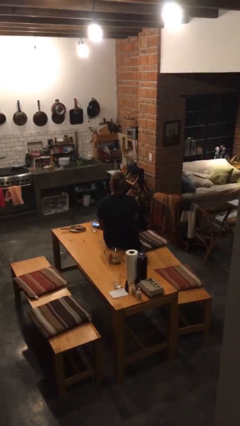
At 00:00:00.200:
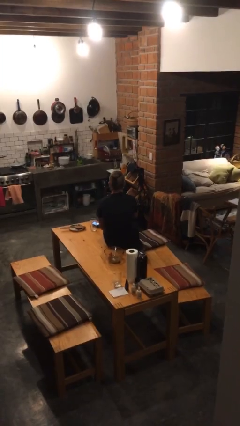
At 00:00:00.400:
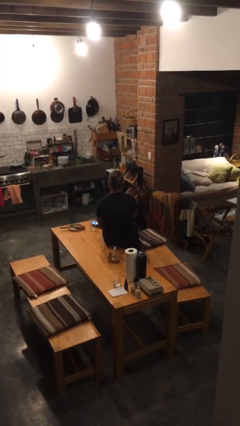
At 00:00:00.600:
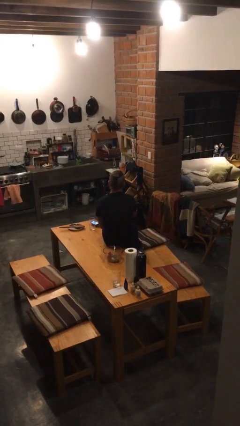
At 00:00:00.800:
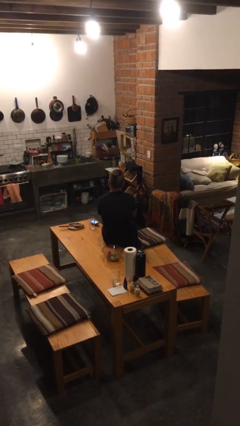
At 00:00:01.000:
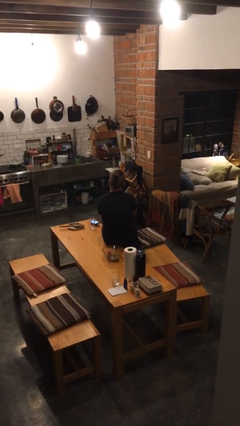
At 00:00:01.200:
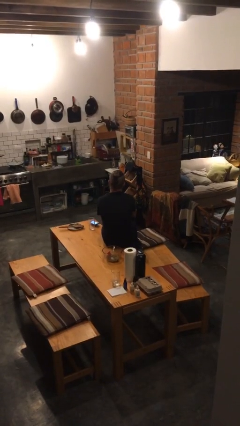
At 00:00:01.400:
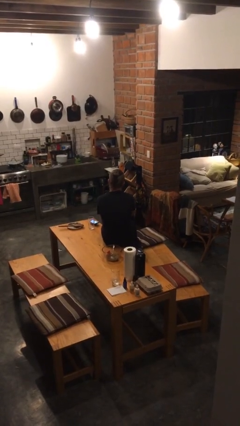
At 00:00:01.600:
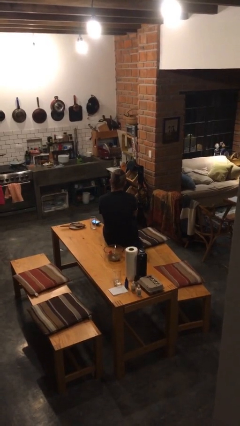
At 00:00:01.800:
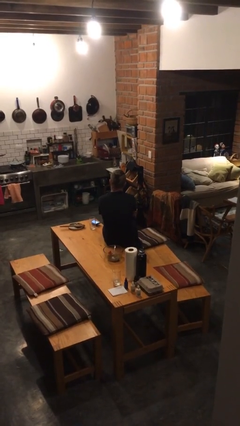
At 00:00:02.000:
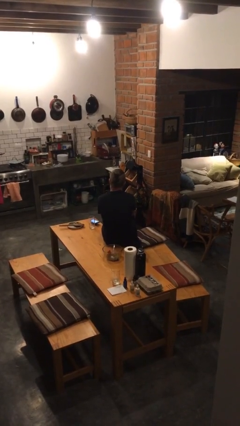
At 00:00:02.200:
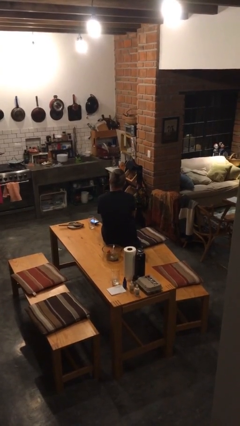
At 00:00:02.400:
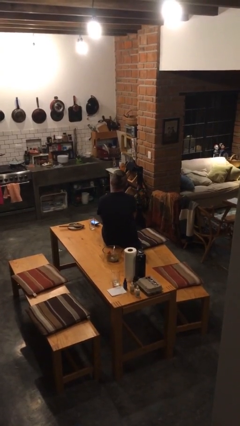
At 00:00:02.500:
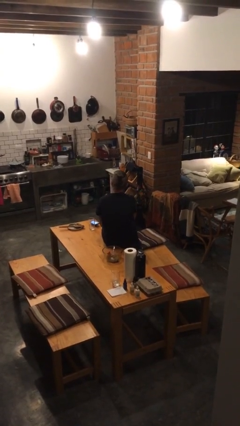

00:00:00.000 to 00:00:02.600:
person strokes chin

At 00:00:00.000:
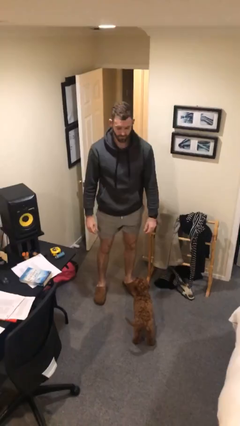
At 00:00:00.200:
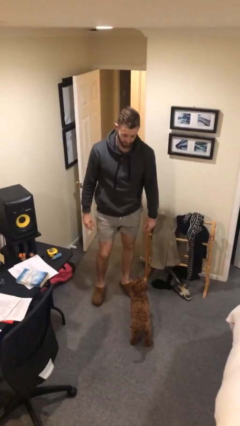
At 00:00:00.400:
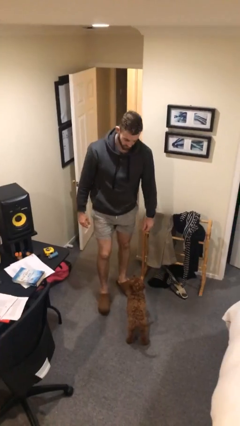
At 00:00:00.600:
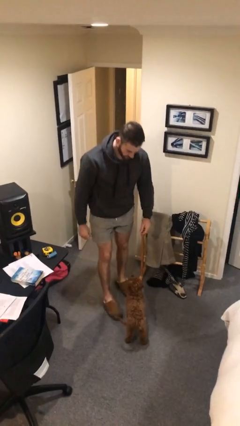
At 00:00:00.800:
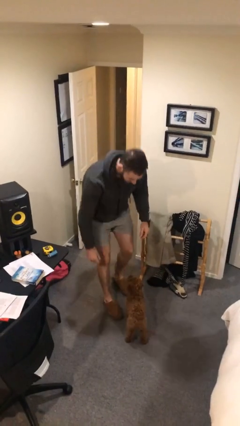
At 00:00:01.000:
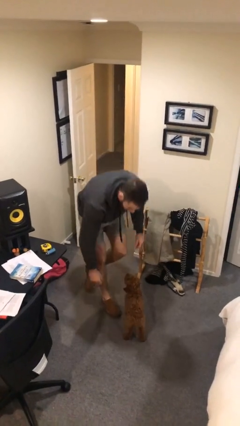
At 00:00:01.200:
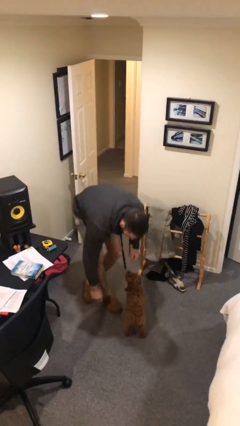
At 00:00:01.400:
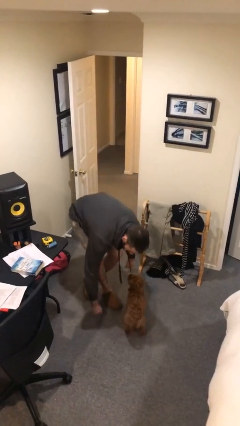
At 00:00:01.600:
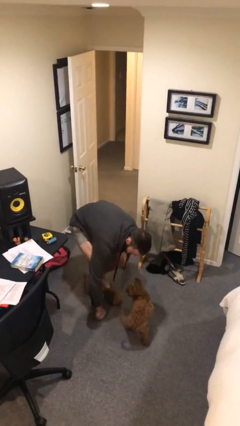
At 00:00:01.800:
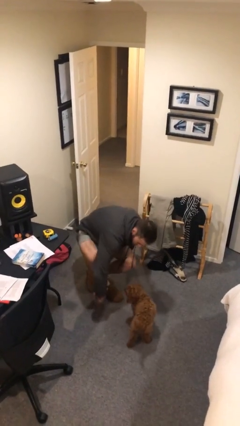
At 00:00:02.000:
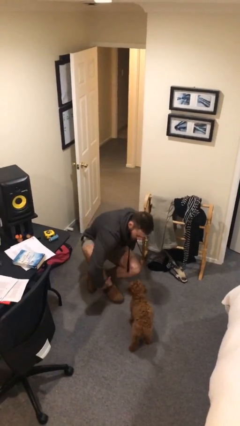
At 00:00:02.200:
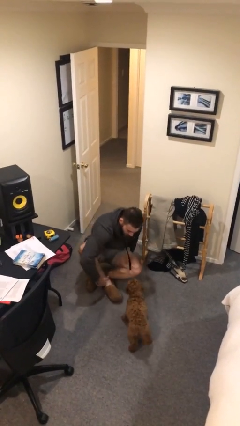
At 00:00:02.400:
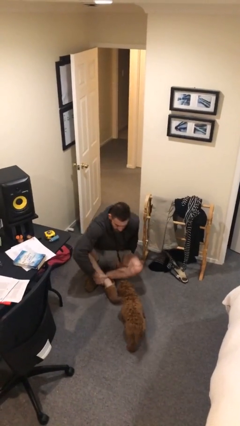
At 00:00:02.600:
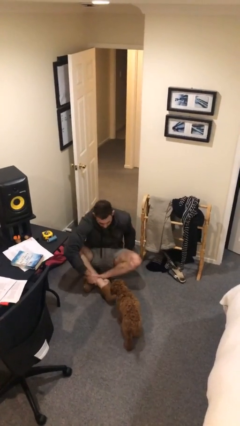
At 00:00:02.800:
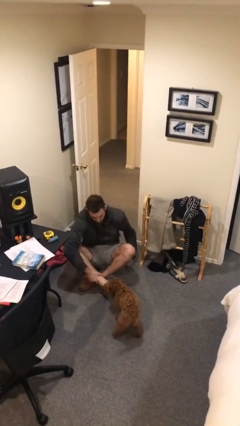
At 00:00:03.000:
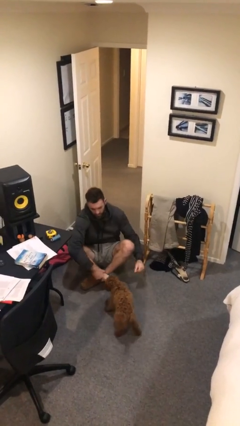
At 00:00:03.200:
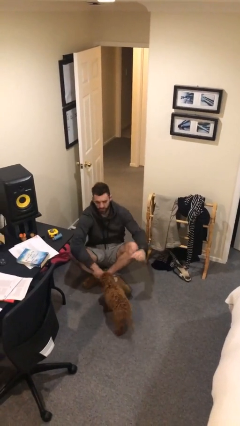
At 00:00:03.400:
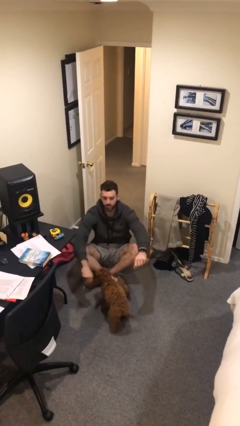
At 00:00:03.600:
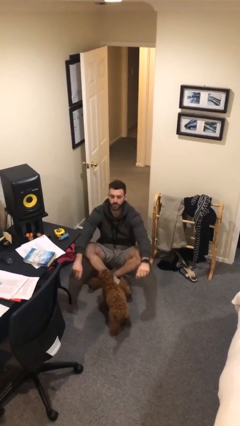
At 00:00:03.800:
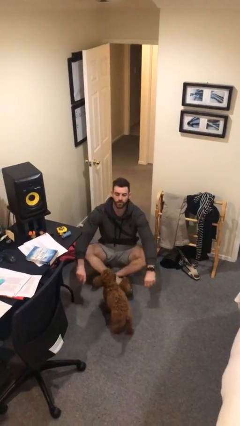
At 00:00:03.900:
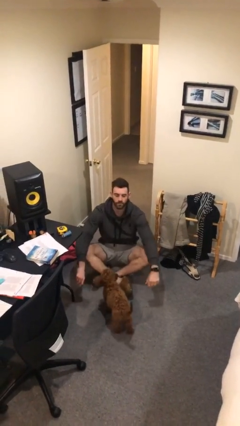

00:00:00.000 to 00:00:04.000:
person sits crisscross

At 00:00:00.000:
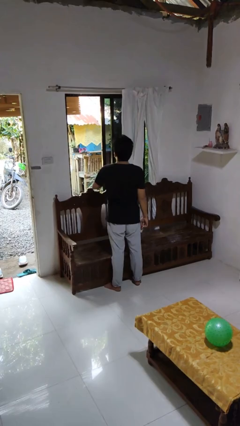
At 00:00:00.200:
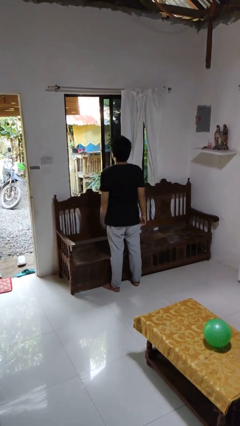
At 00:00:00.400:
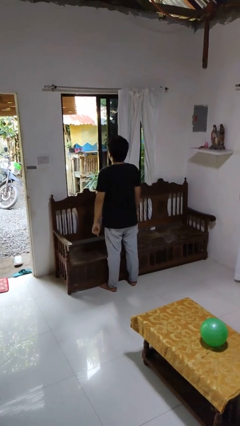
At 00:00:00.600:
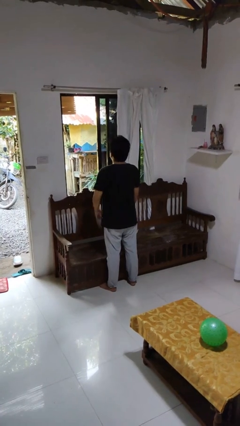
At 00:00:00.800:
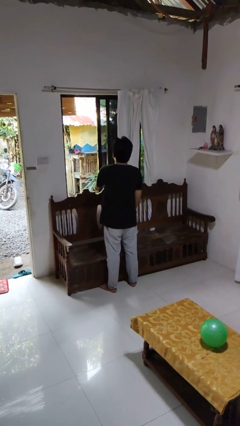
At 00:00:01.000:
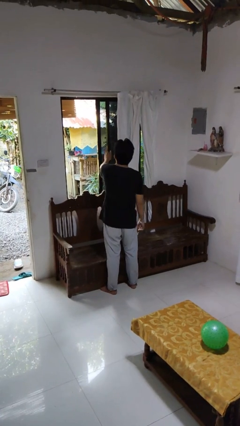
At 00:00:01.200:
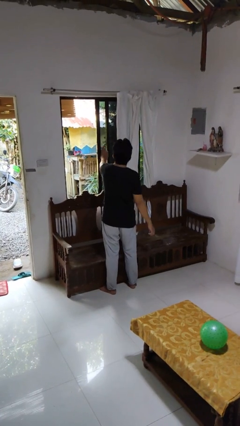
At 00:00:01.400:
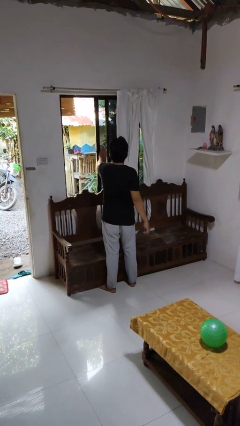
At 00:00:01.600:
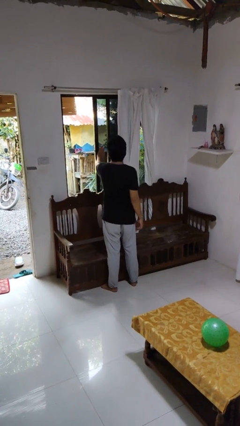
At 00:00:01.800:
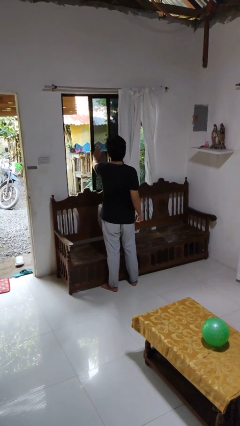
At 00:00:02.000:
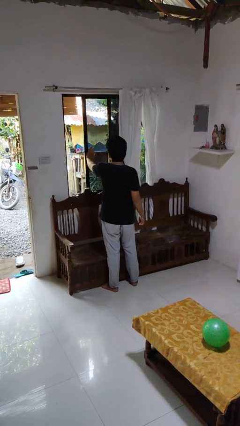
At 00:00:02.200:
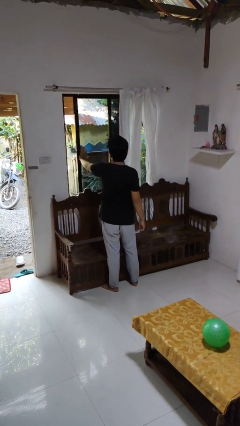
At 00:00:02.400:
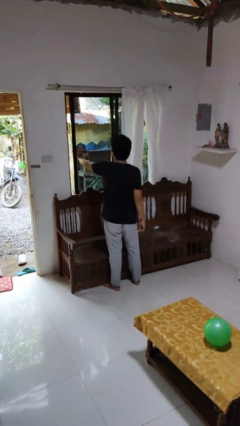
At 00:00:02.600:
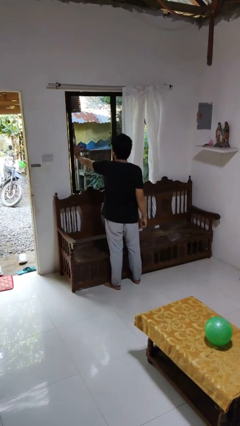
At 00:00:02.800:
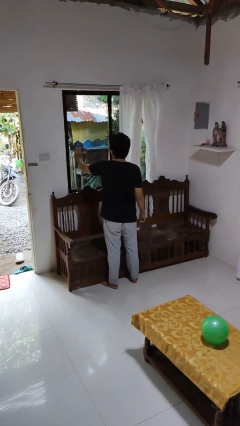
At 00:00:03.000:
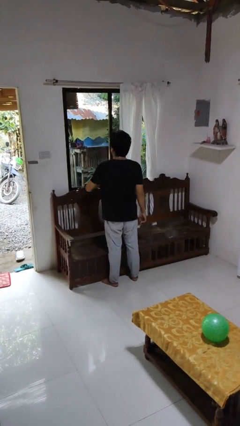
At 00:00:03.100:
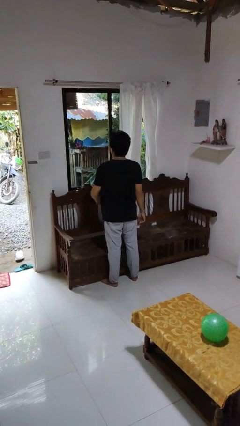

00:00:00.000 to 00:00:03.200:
person closes home window

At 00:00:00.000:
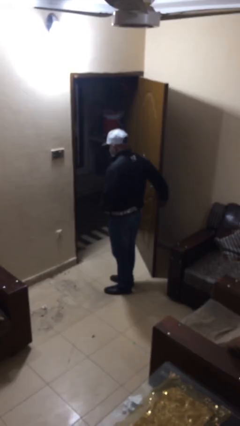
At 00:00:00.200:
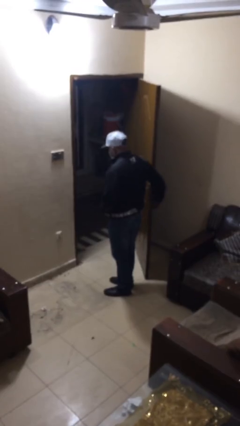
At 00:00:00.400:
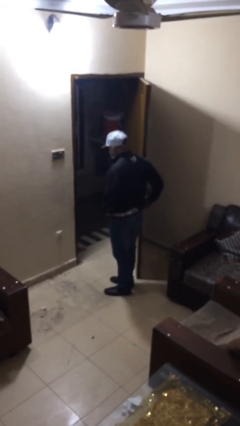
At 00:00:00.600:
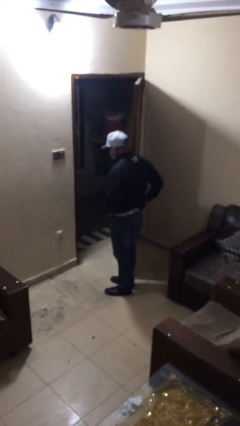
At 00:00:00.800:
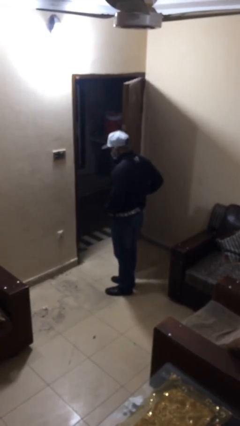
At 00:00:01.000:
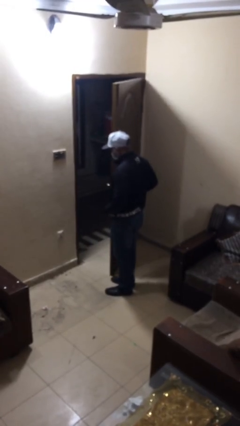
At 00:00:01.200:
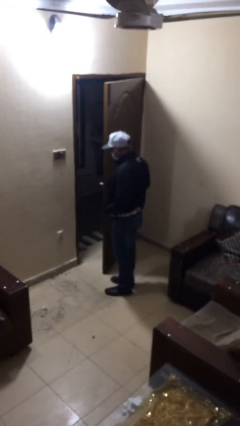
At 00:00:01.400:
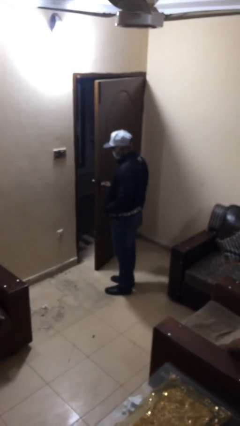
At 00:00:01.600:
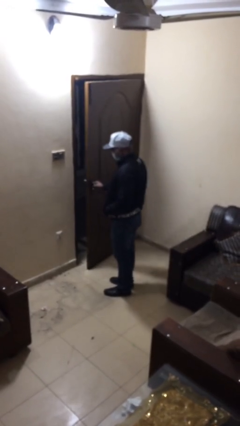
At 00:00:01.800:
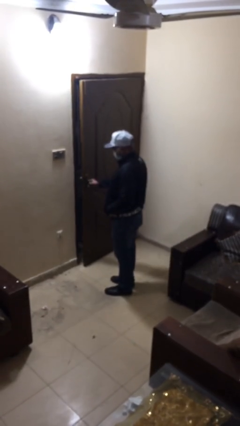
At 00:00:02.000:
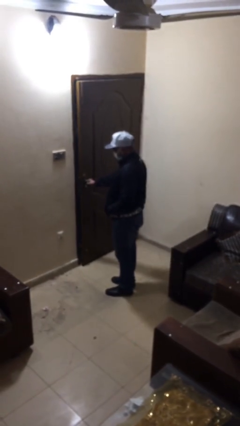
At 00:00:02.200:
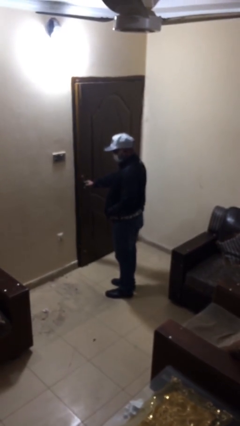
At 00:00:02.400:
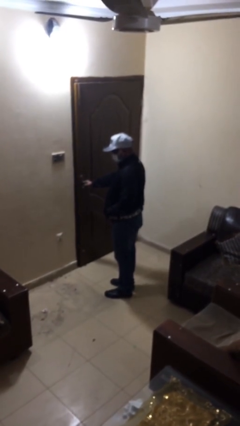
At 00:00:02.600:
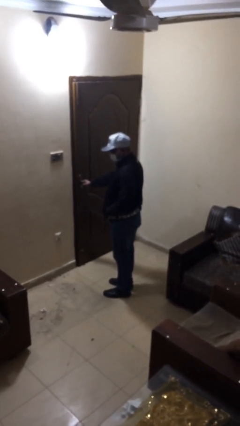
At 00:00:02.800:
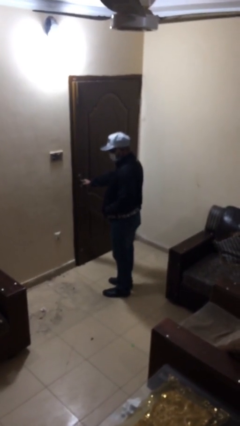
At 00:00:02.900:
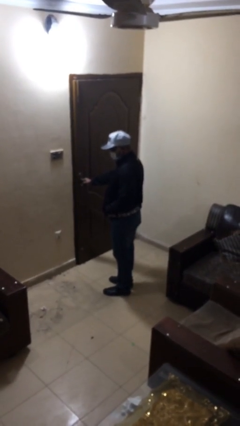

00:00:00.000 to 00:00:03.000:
person closes facility door

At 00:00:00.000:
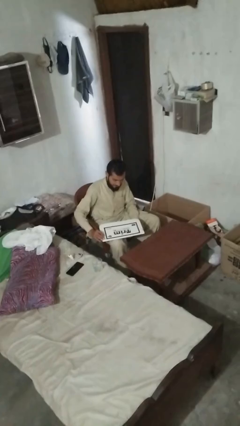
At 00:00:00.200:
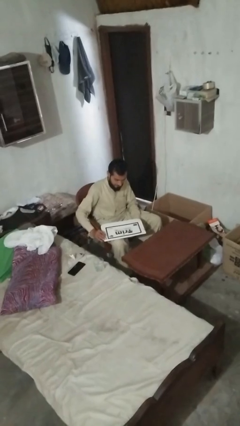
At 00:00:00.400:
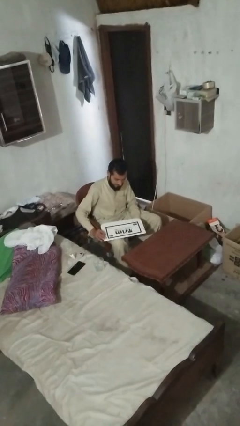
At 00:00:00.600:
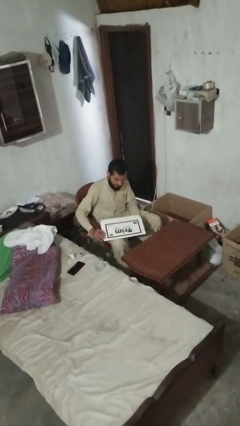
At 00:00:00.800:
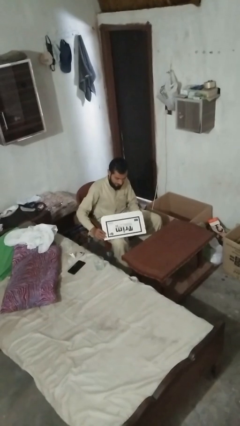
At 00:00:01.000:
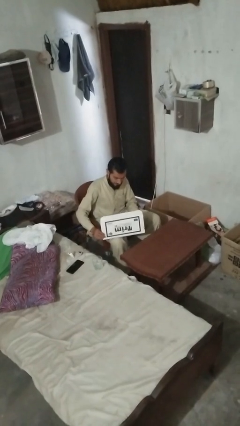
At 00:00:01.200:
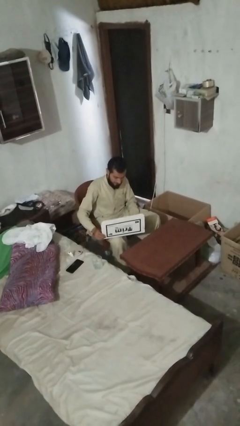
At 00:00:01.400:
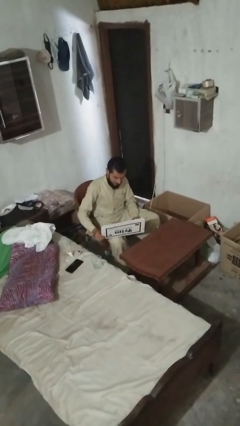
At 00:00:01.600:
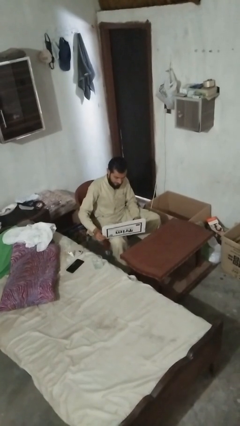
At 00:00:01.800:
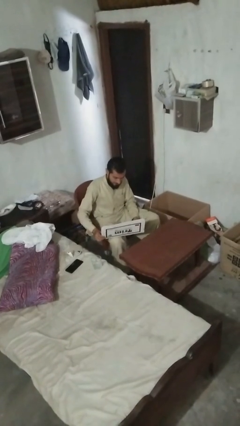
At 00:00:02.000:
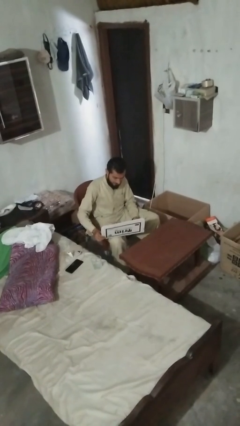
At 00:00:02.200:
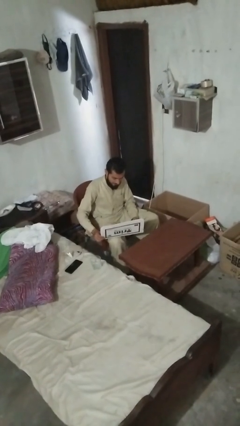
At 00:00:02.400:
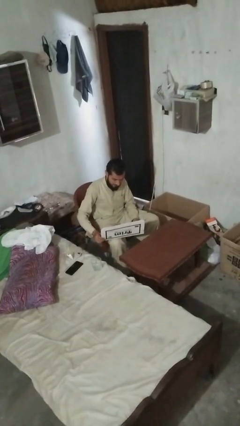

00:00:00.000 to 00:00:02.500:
person opens laptop

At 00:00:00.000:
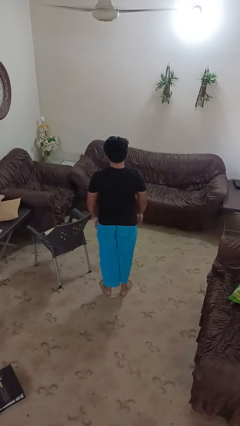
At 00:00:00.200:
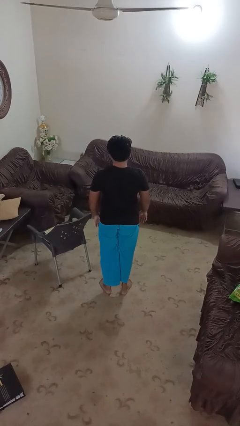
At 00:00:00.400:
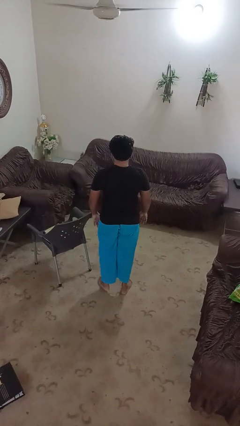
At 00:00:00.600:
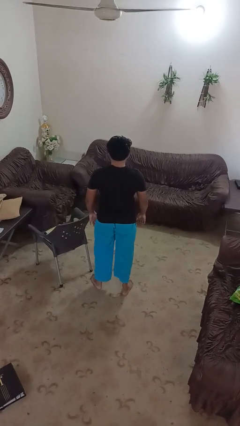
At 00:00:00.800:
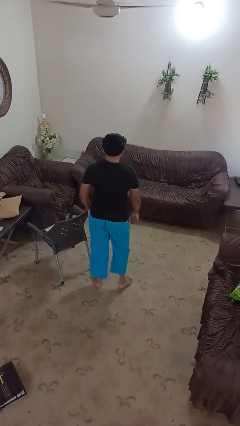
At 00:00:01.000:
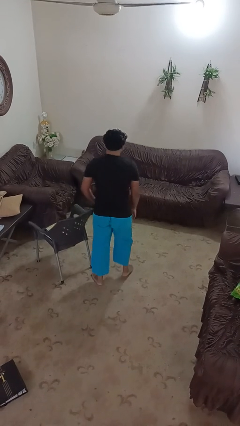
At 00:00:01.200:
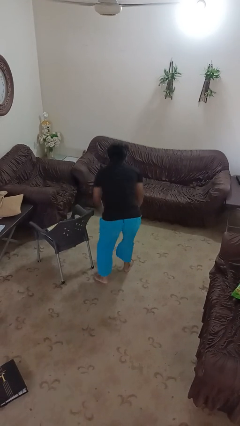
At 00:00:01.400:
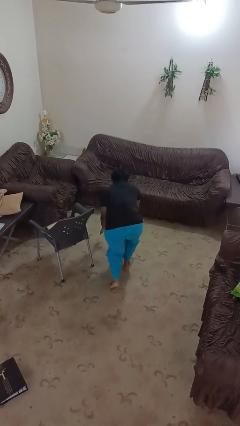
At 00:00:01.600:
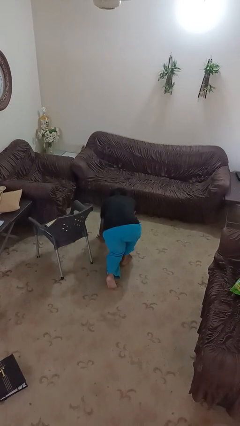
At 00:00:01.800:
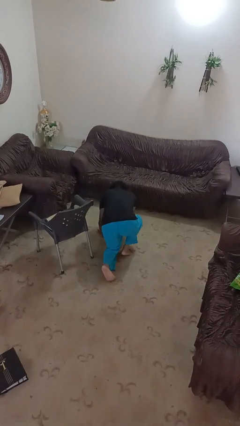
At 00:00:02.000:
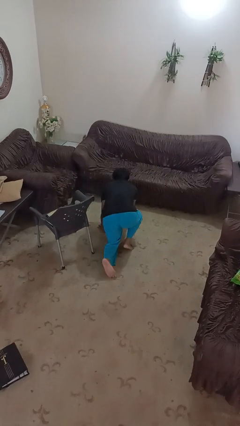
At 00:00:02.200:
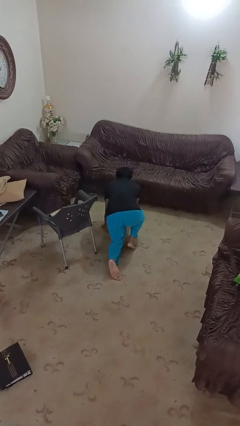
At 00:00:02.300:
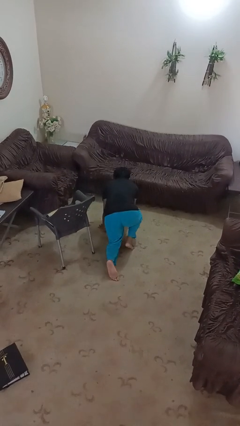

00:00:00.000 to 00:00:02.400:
person trips on object on floor
